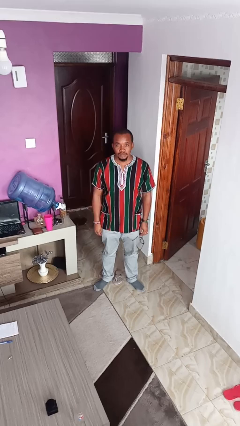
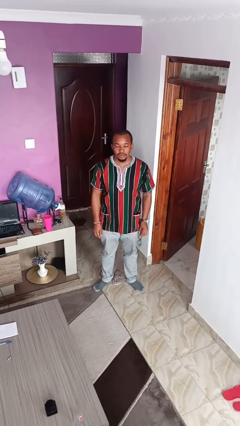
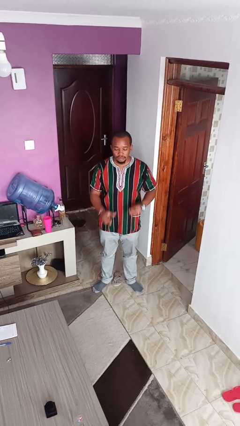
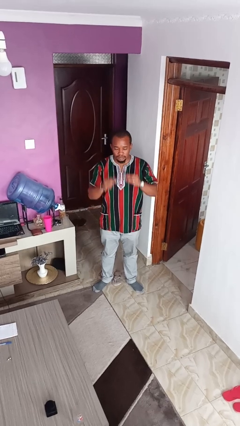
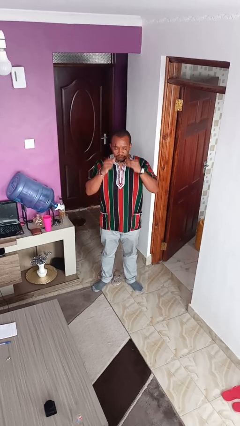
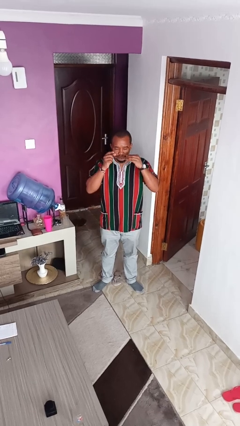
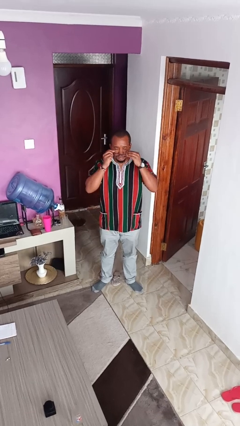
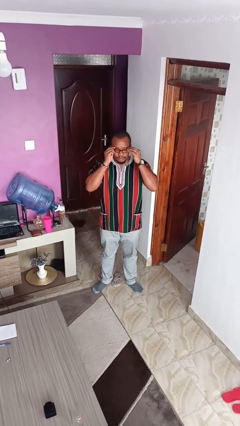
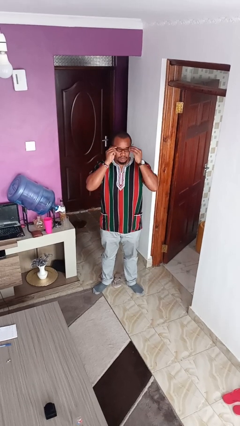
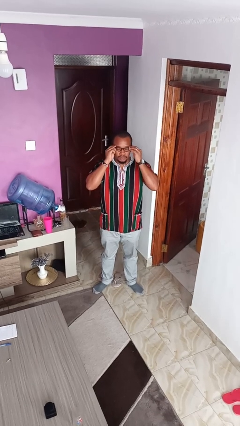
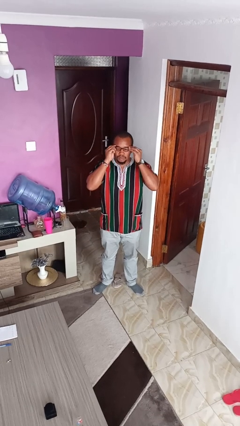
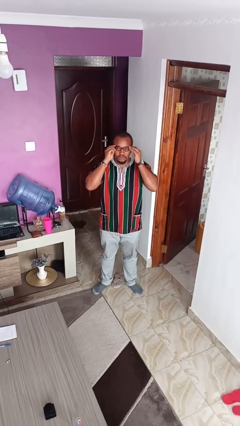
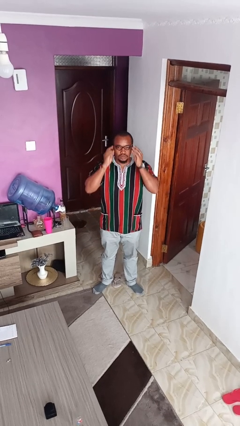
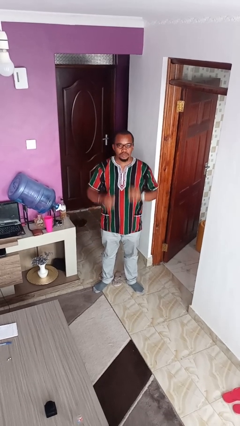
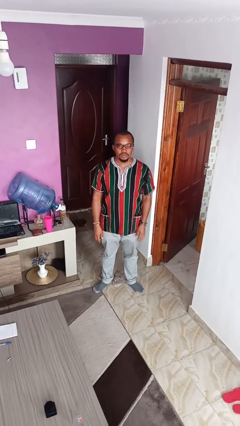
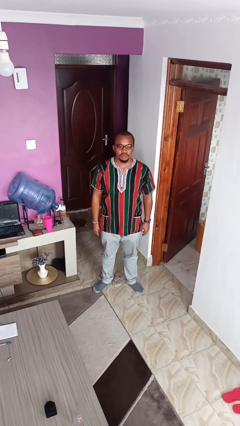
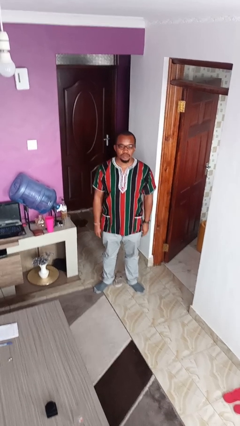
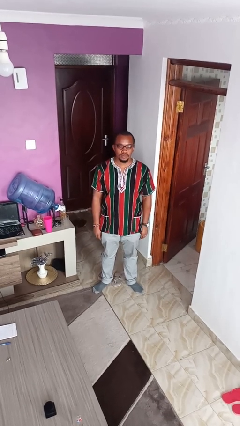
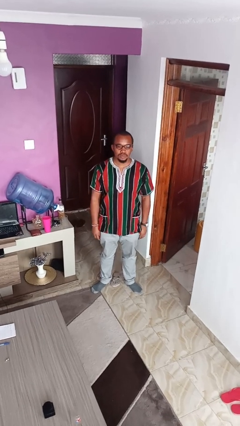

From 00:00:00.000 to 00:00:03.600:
person puts on glasses

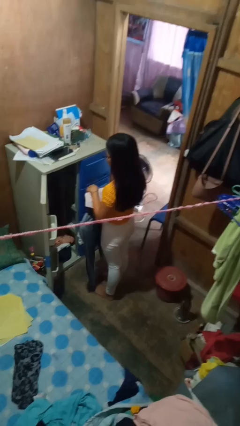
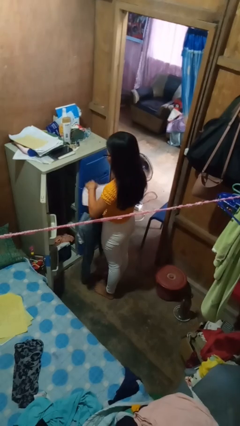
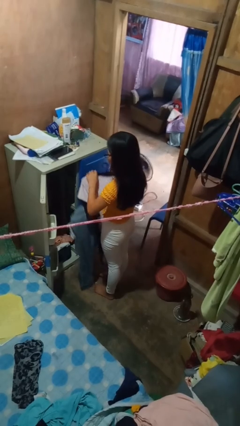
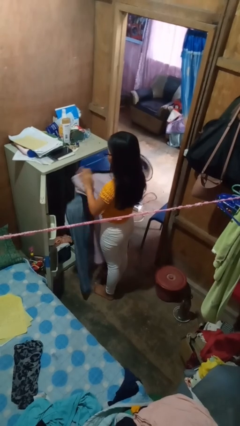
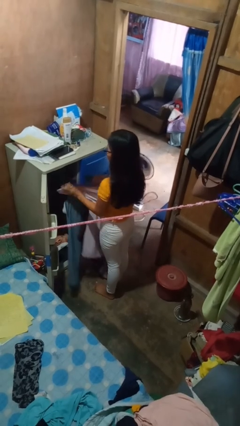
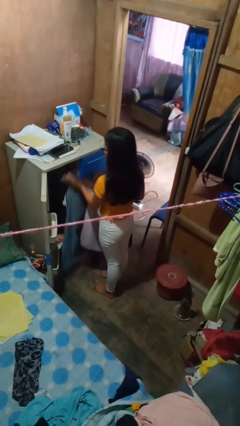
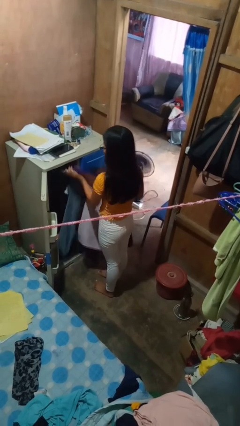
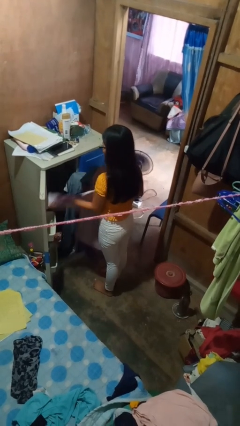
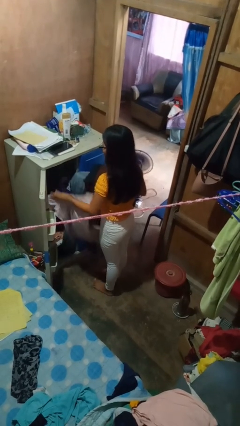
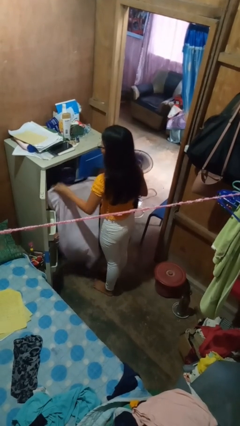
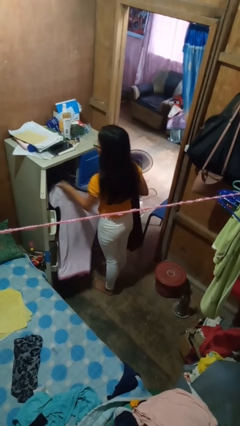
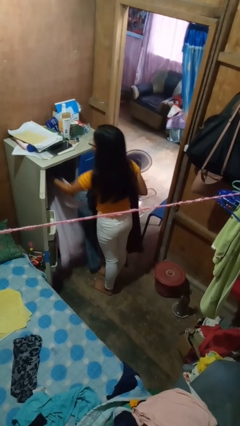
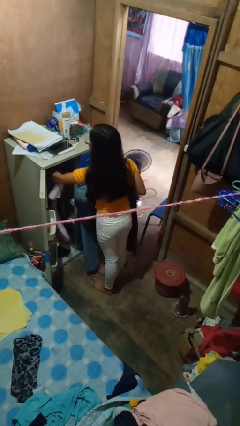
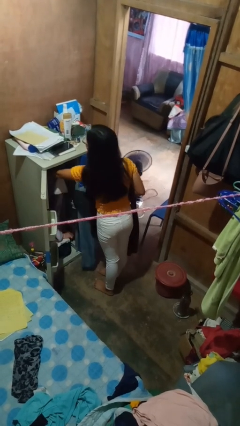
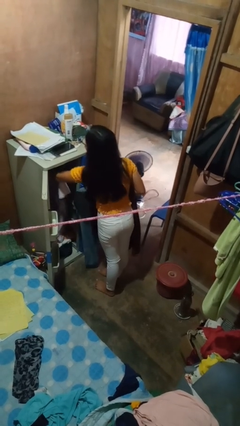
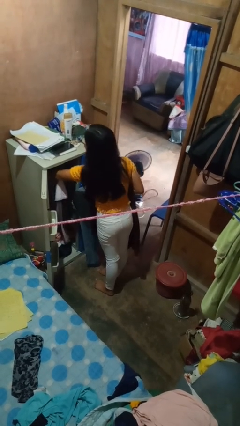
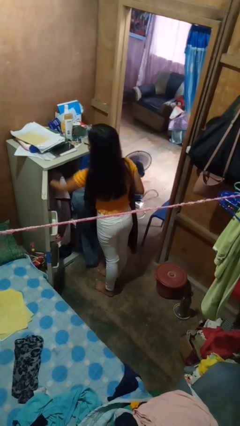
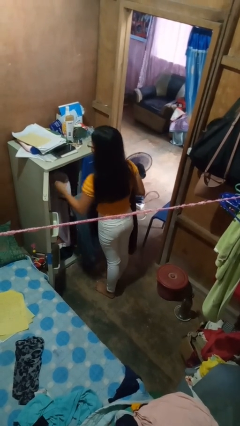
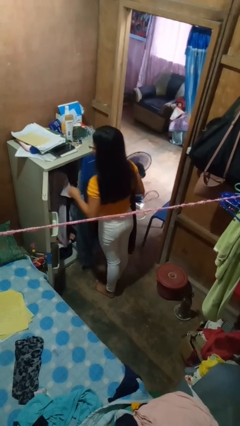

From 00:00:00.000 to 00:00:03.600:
person puts clothes into closet

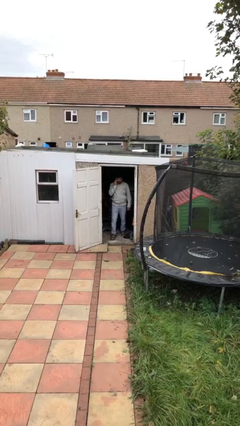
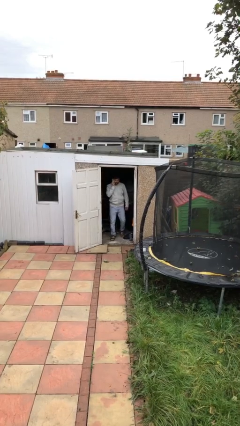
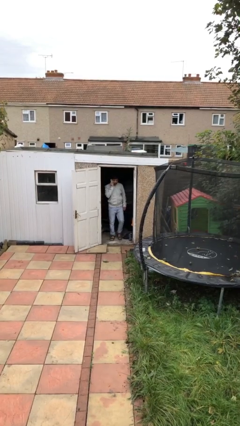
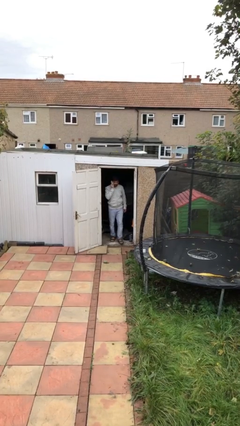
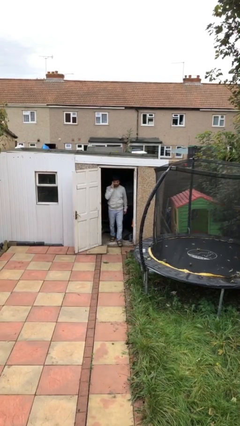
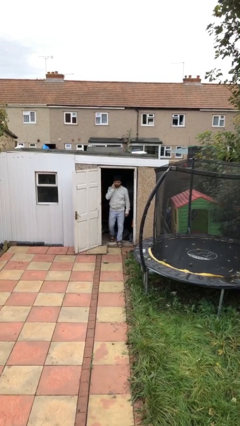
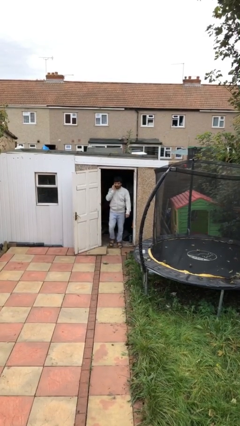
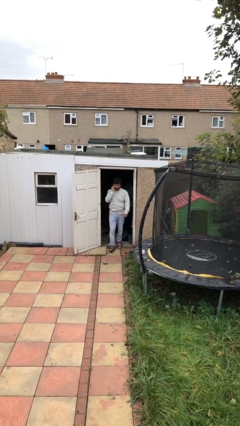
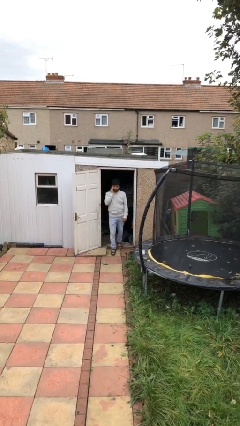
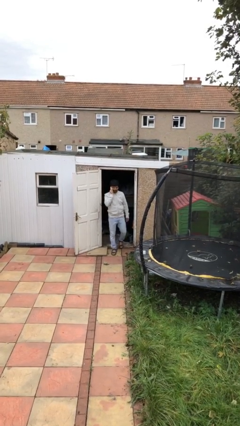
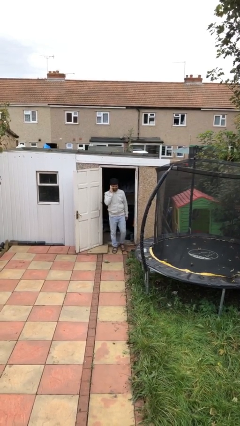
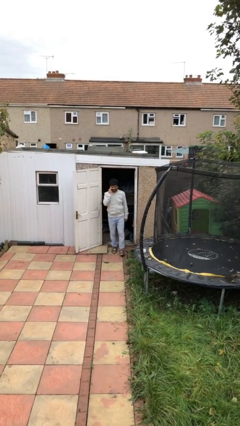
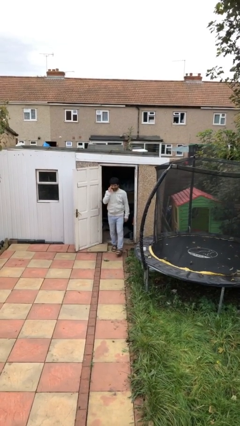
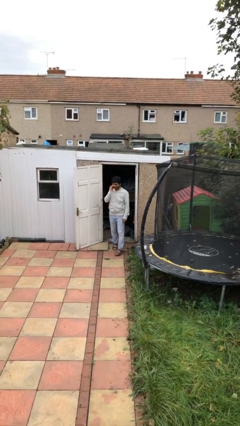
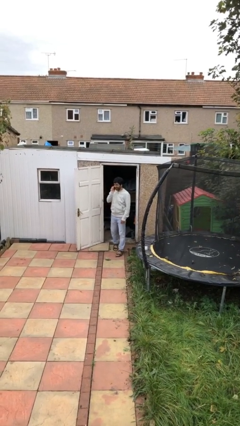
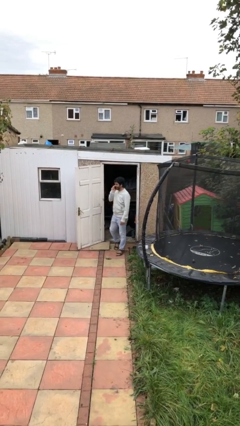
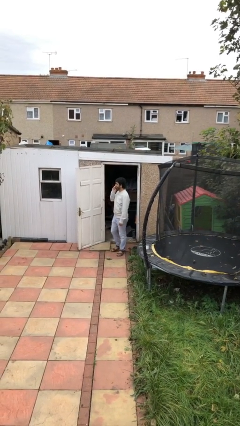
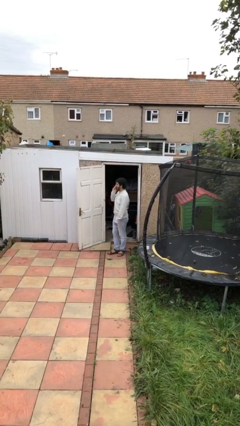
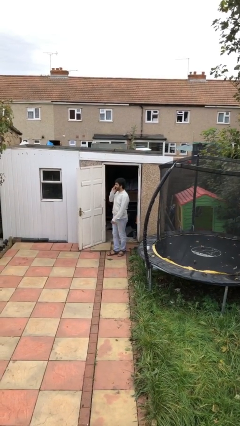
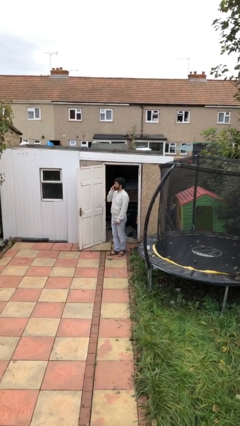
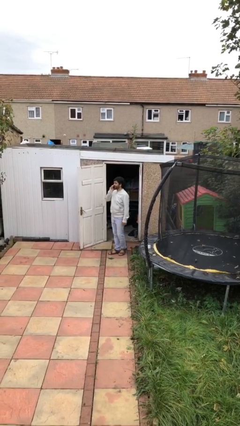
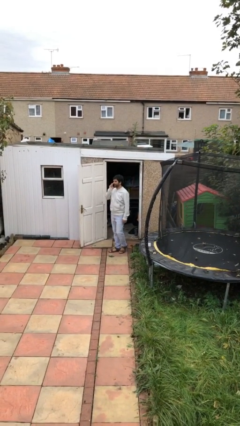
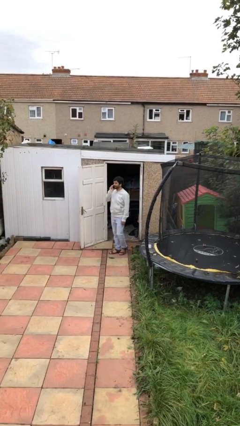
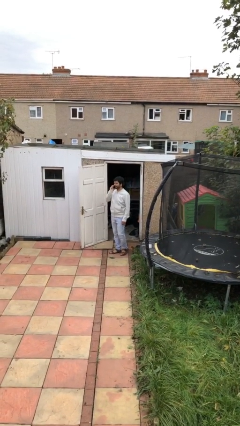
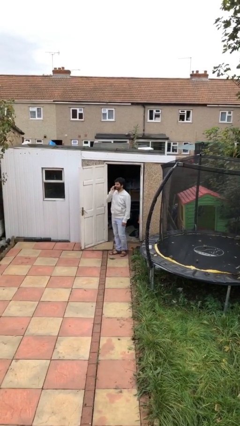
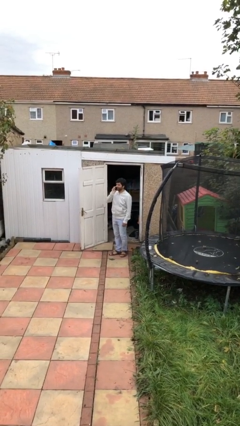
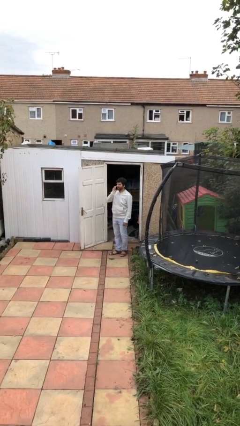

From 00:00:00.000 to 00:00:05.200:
person enters scene through structure

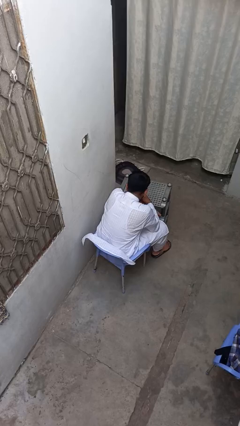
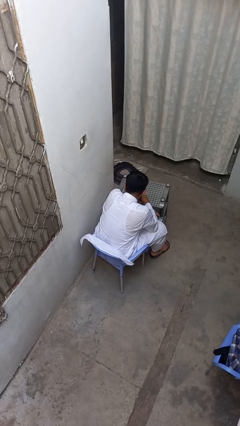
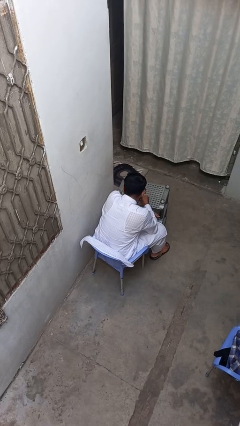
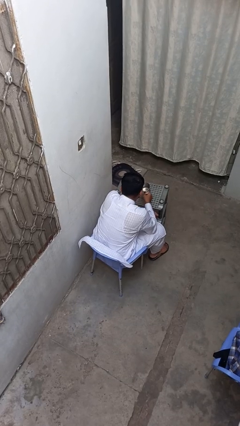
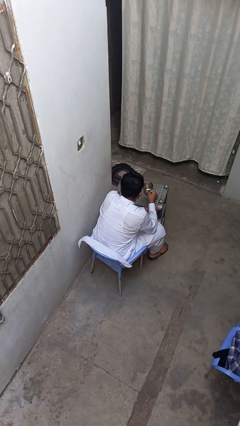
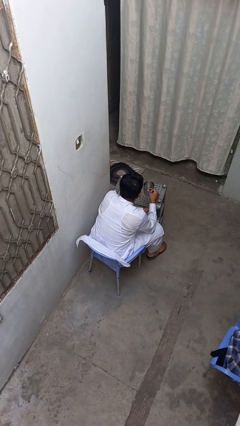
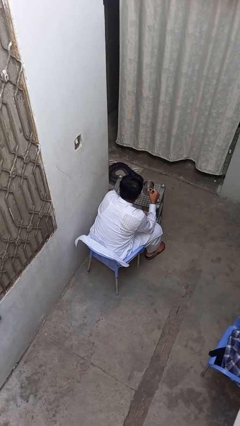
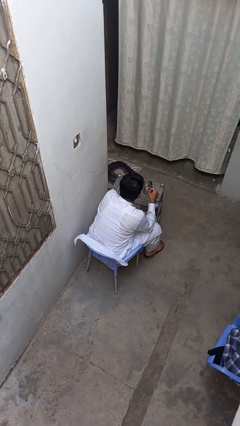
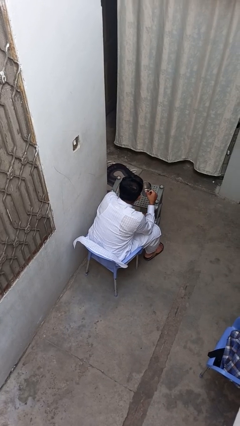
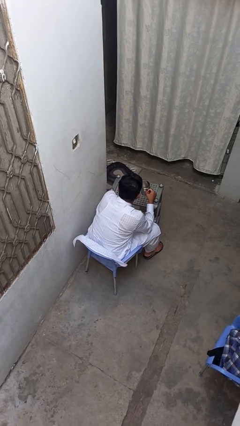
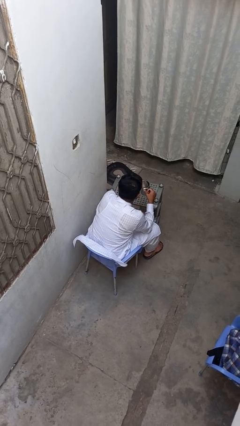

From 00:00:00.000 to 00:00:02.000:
person picks up object from table

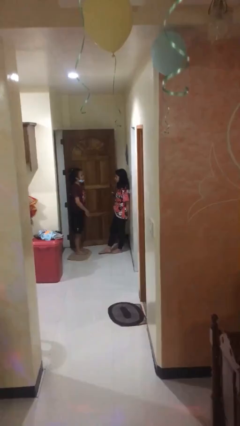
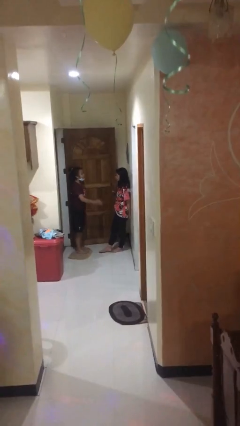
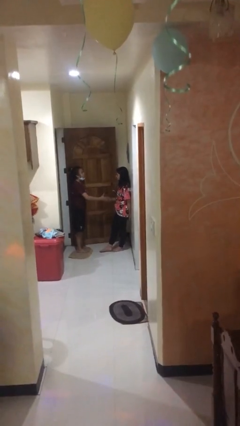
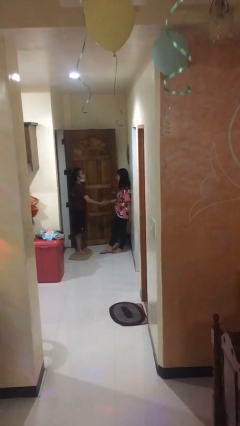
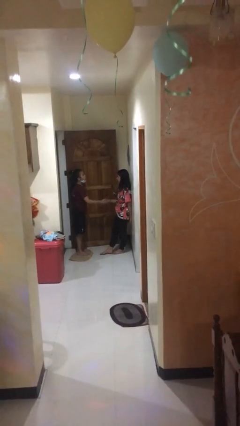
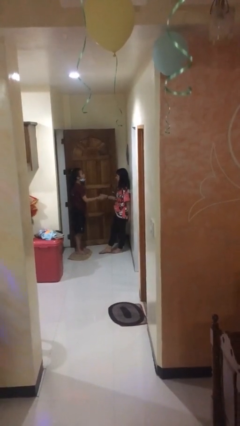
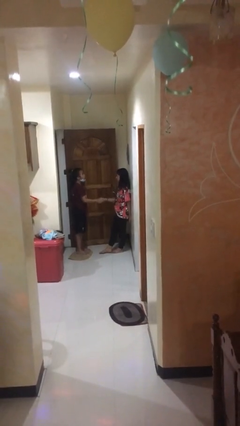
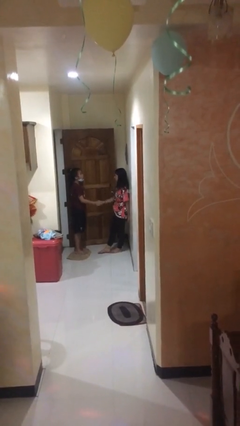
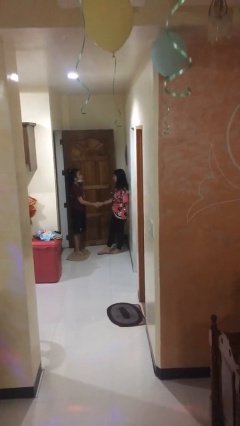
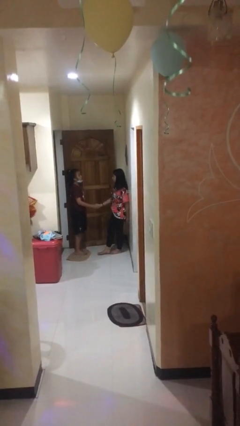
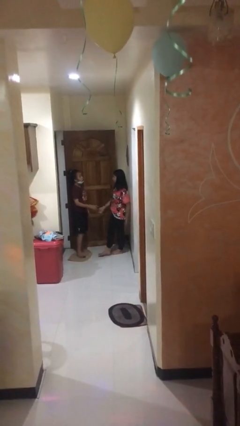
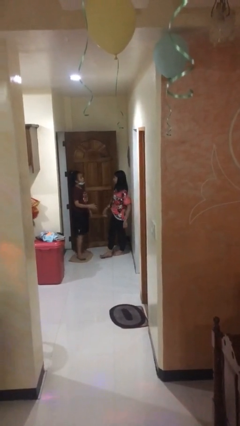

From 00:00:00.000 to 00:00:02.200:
person shakes hand

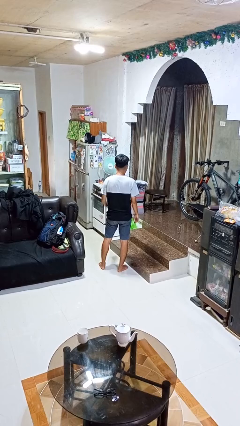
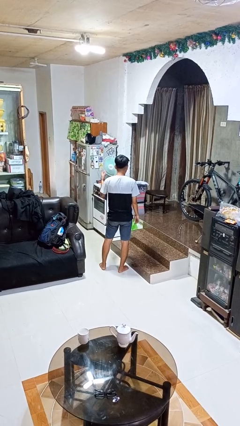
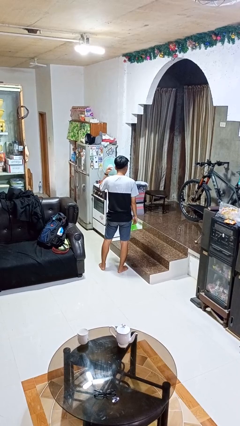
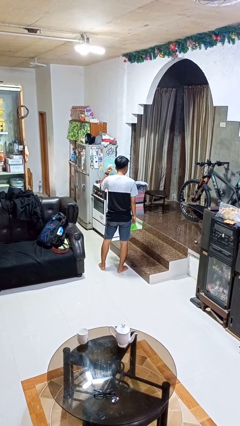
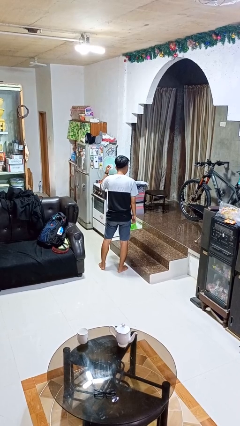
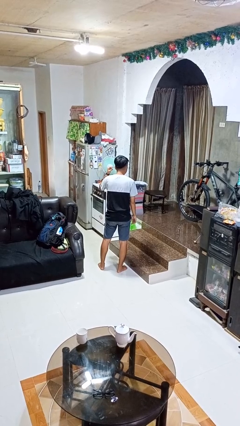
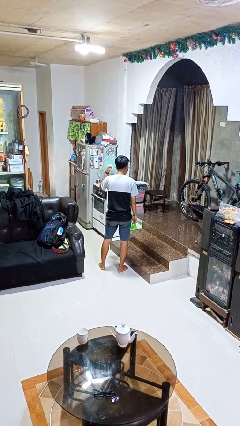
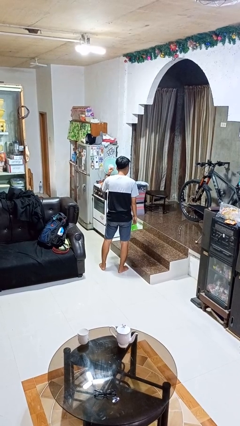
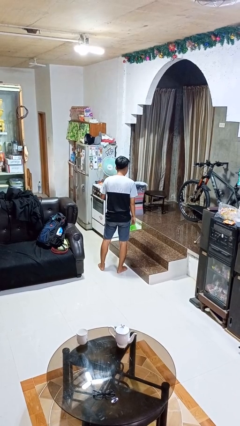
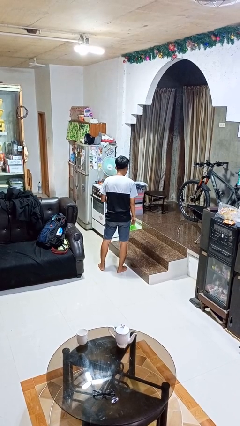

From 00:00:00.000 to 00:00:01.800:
person gestures listen closely
